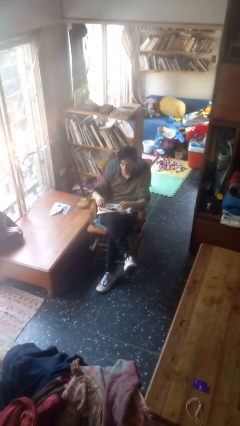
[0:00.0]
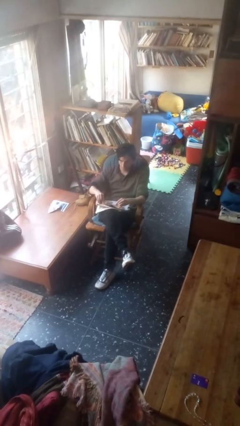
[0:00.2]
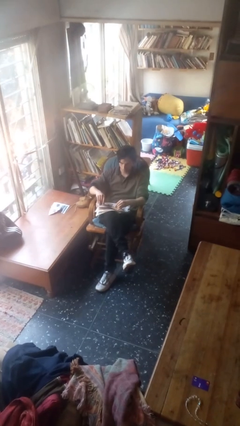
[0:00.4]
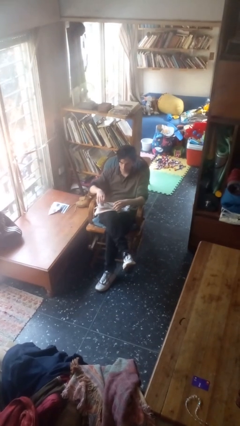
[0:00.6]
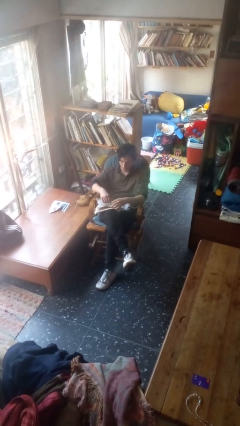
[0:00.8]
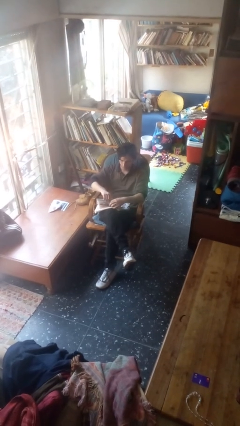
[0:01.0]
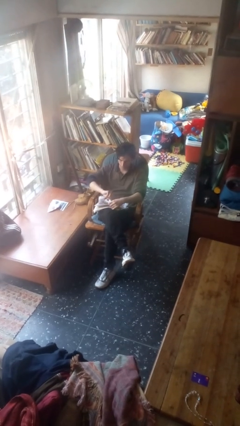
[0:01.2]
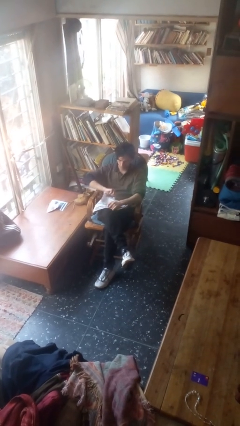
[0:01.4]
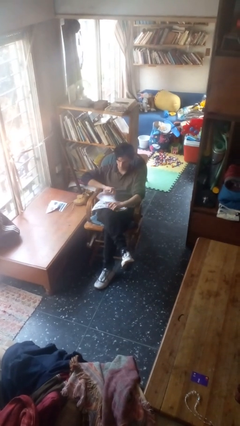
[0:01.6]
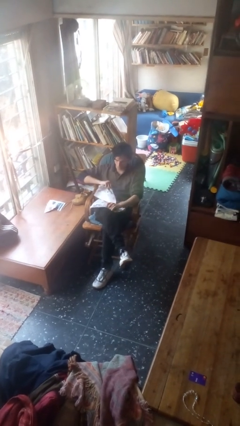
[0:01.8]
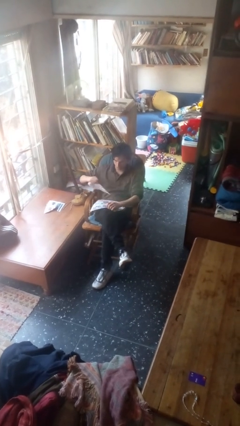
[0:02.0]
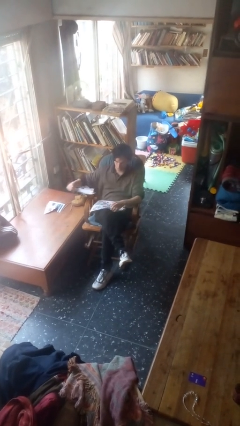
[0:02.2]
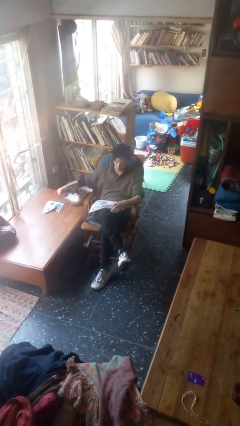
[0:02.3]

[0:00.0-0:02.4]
person tears paper

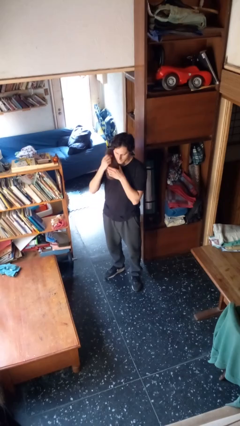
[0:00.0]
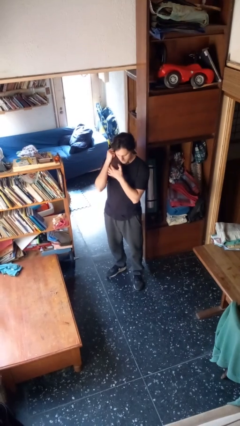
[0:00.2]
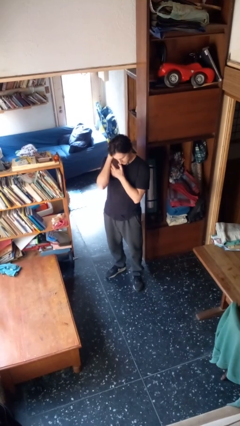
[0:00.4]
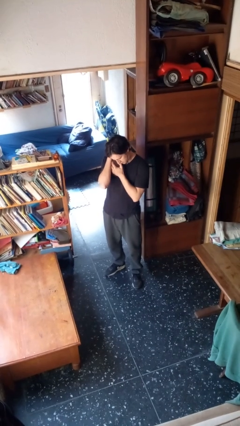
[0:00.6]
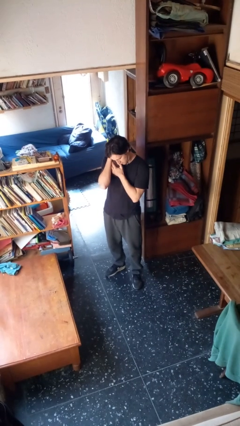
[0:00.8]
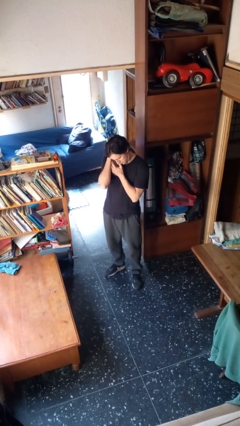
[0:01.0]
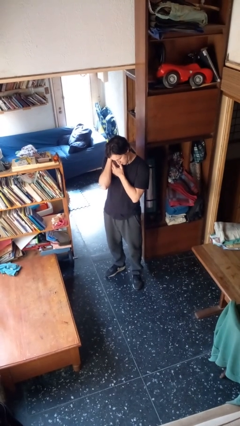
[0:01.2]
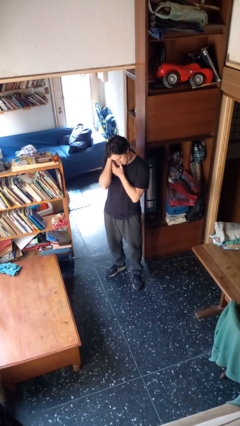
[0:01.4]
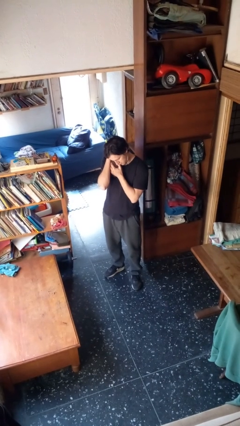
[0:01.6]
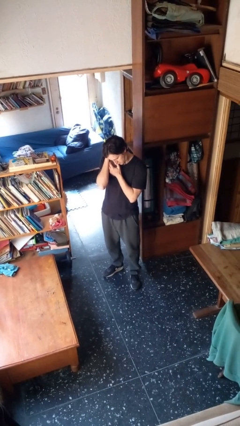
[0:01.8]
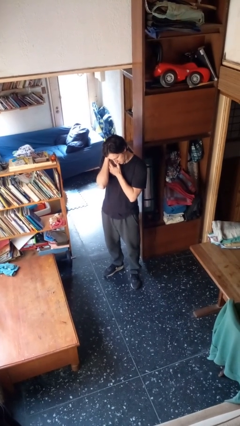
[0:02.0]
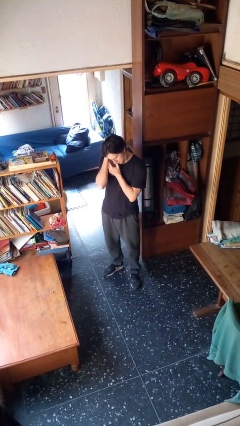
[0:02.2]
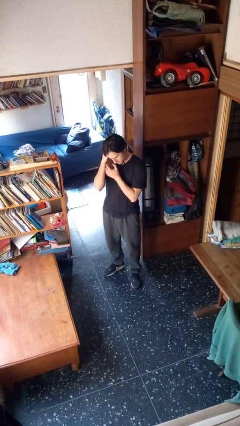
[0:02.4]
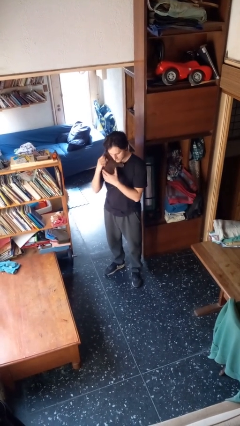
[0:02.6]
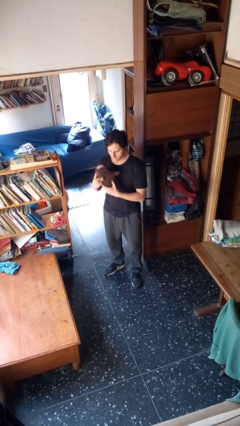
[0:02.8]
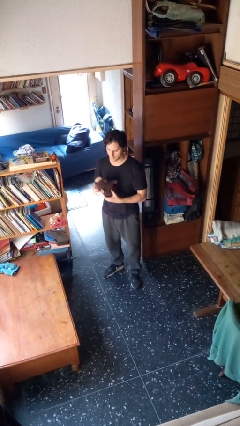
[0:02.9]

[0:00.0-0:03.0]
person hugs stuffed animal

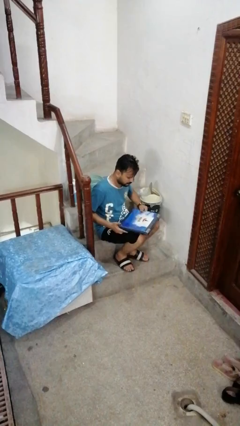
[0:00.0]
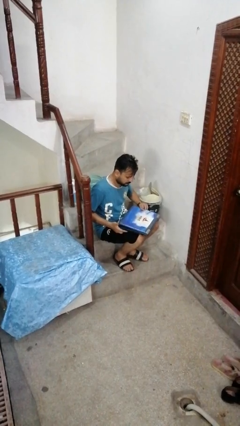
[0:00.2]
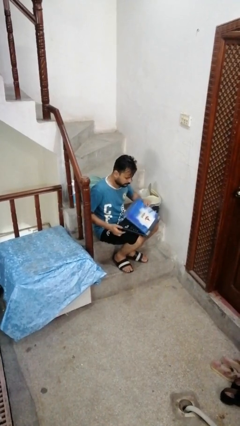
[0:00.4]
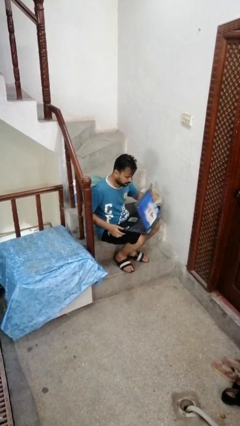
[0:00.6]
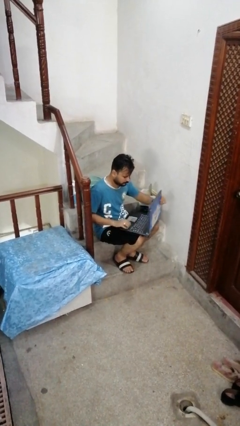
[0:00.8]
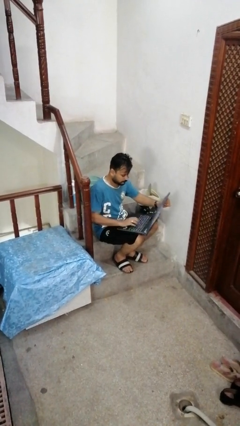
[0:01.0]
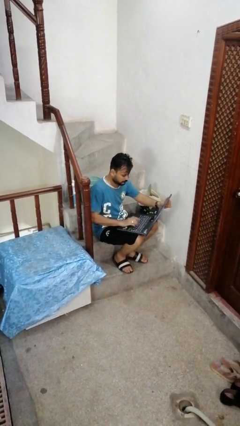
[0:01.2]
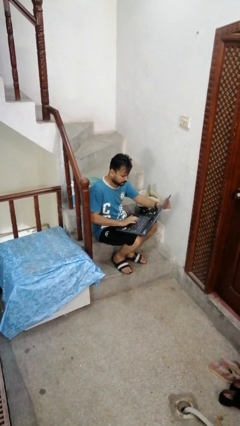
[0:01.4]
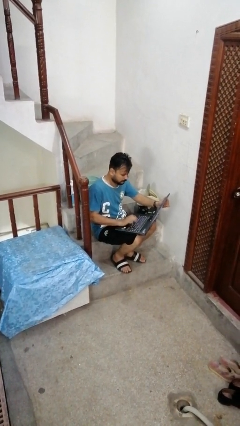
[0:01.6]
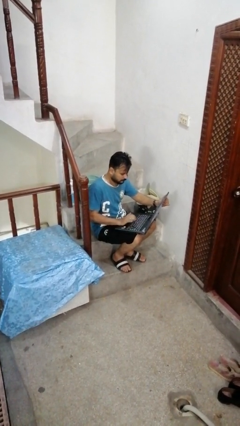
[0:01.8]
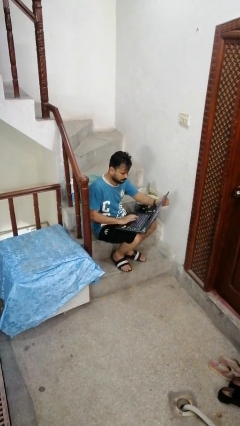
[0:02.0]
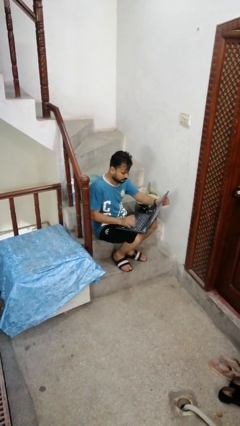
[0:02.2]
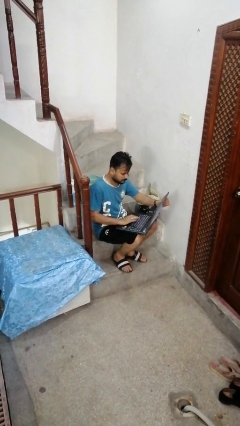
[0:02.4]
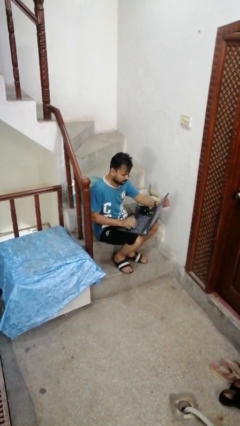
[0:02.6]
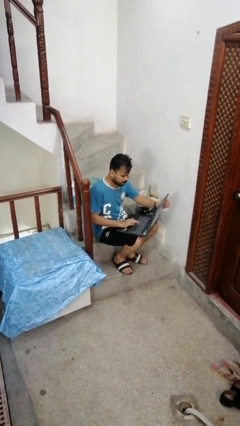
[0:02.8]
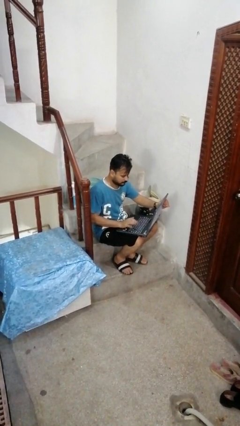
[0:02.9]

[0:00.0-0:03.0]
person opens laptop

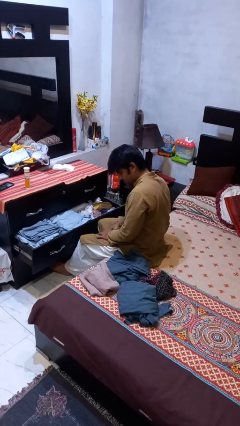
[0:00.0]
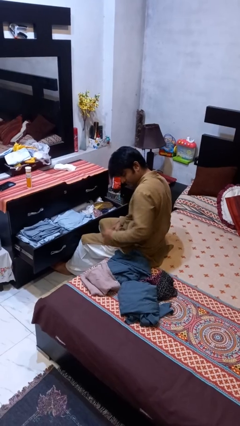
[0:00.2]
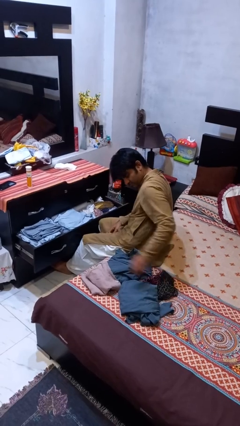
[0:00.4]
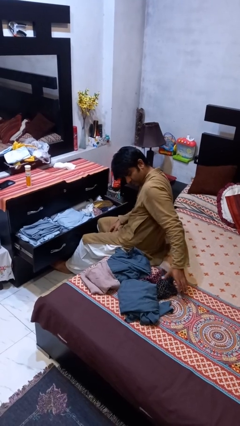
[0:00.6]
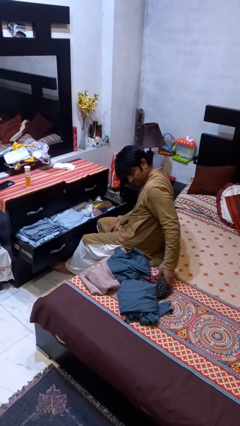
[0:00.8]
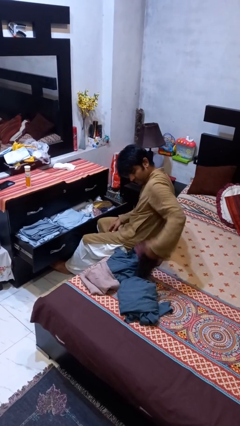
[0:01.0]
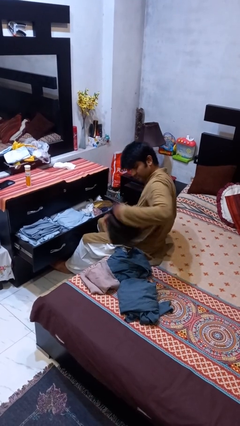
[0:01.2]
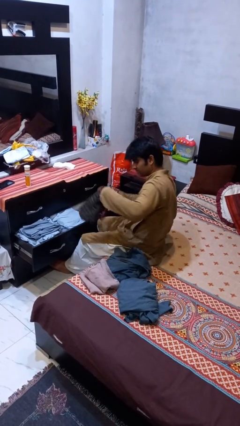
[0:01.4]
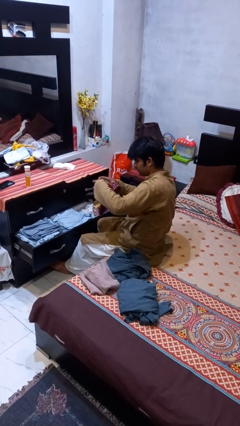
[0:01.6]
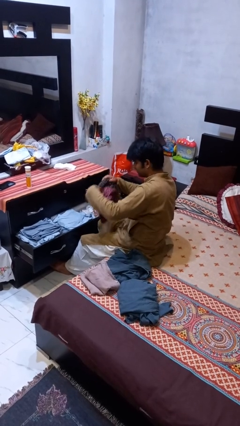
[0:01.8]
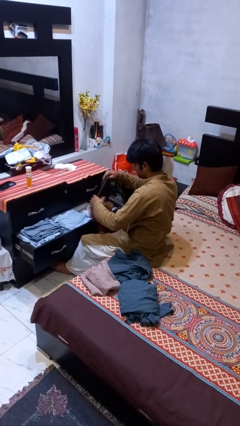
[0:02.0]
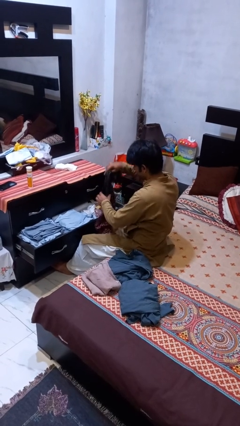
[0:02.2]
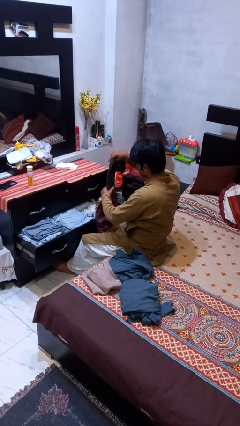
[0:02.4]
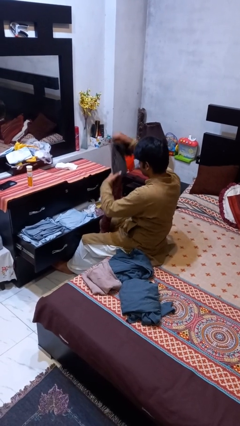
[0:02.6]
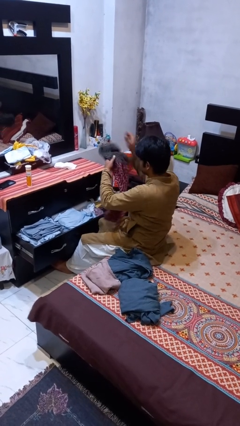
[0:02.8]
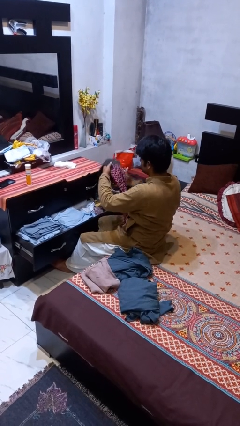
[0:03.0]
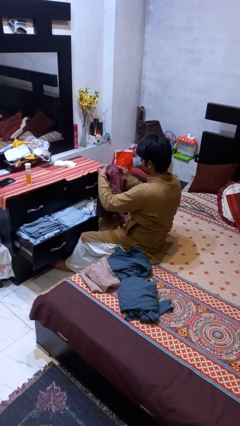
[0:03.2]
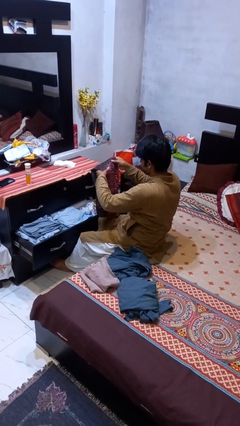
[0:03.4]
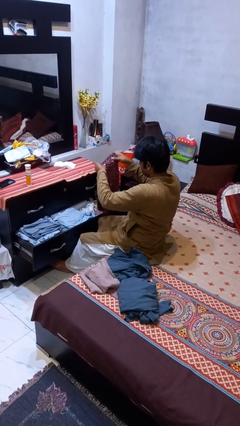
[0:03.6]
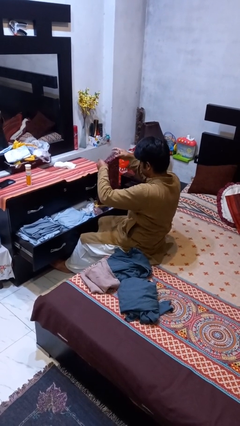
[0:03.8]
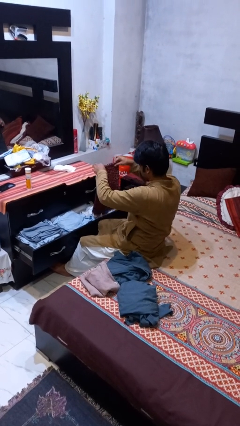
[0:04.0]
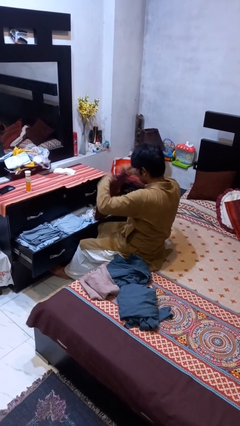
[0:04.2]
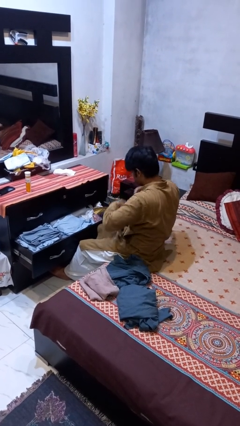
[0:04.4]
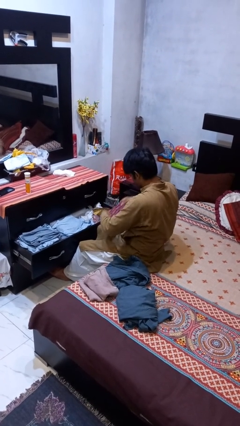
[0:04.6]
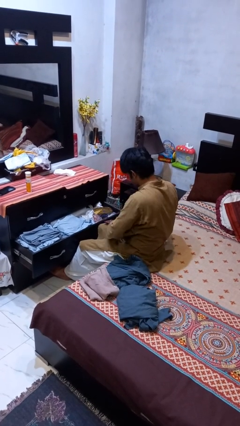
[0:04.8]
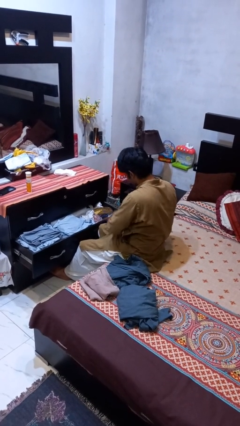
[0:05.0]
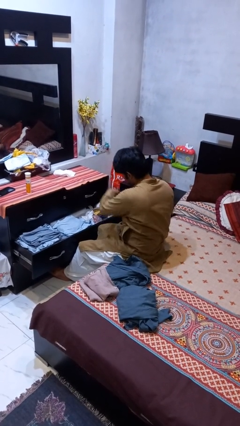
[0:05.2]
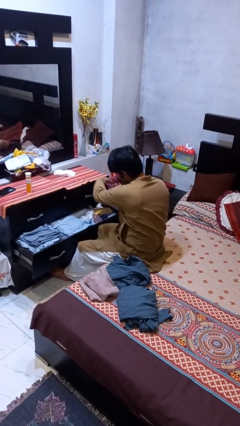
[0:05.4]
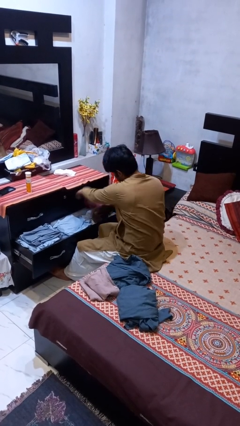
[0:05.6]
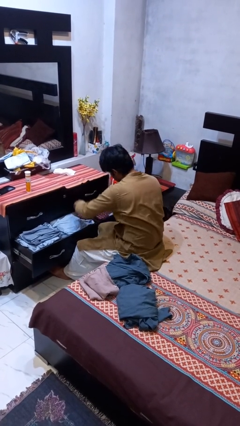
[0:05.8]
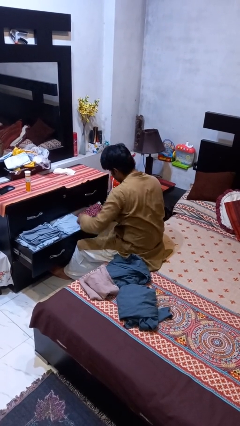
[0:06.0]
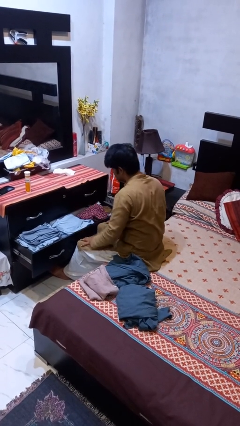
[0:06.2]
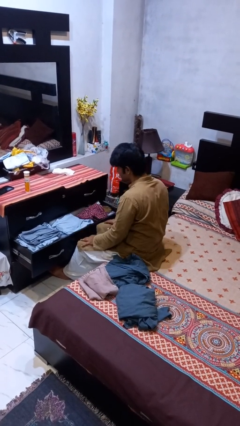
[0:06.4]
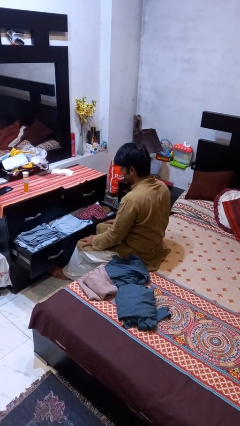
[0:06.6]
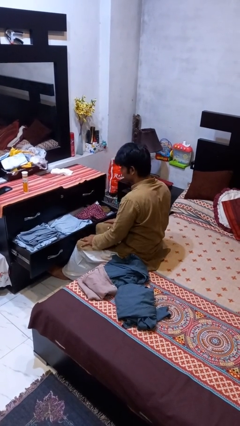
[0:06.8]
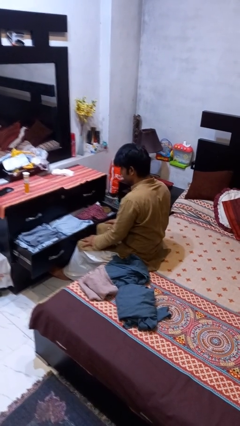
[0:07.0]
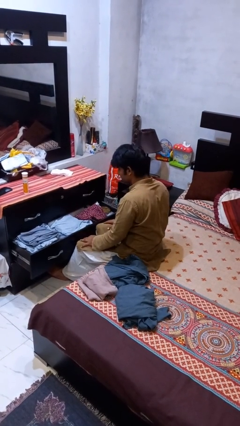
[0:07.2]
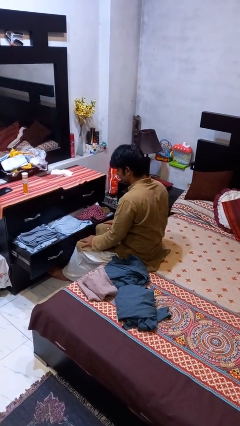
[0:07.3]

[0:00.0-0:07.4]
person puts clothes into dresser

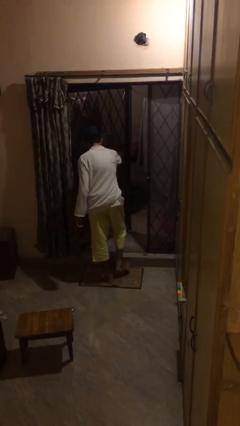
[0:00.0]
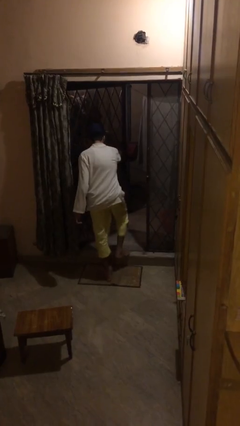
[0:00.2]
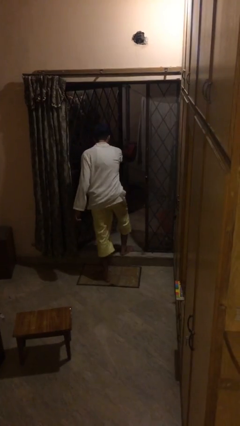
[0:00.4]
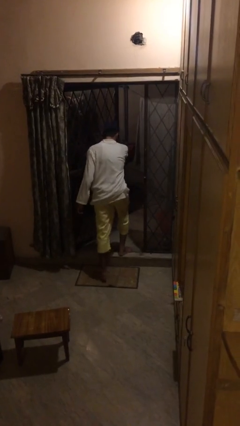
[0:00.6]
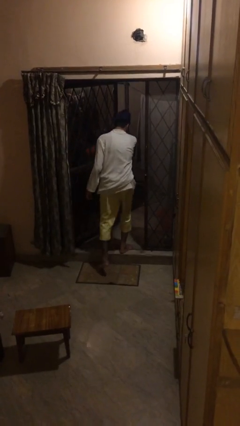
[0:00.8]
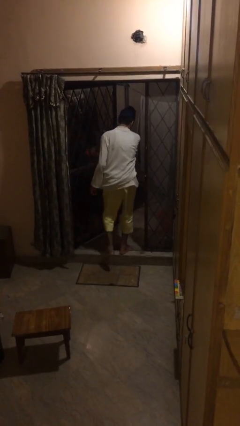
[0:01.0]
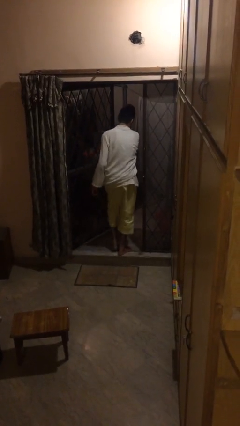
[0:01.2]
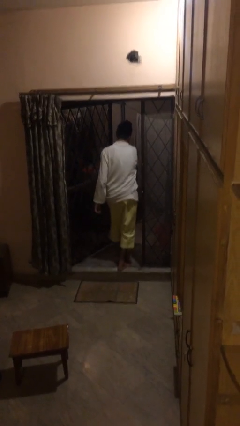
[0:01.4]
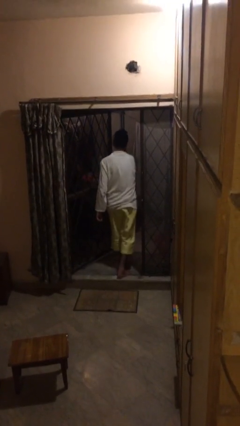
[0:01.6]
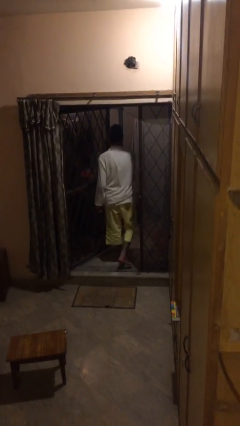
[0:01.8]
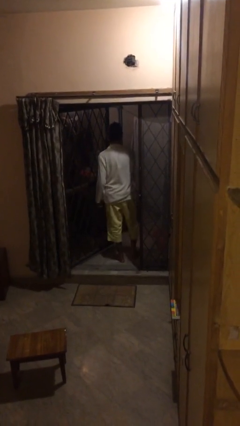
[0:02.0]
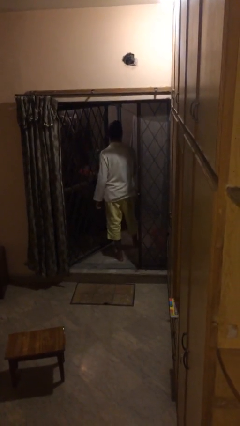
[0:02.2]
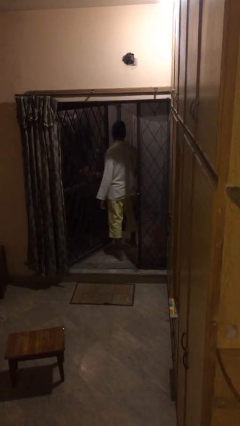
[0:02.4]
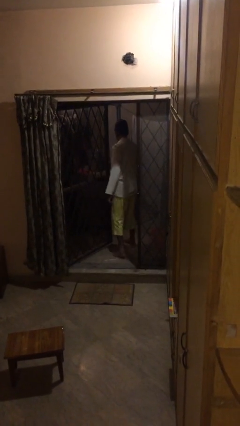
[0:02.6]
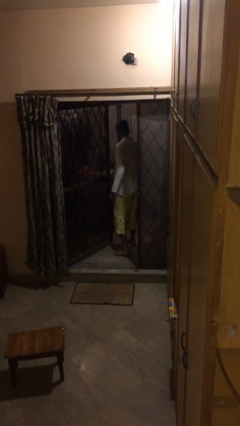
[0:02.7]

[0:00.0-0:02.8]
person exits scene through structure
